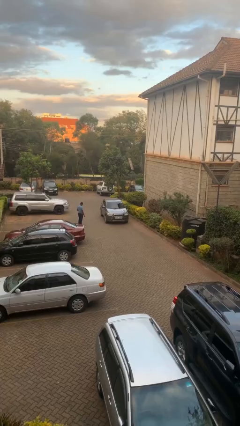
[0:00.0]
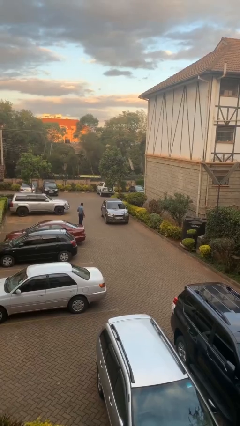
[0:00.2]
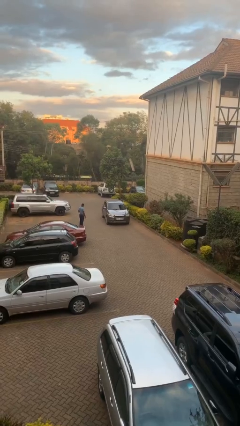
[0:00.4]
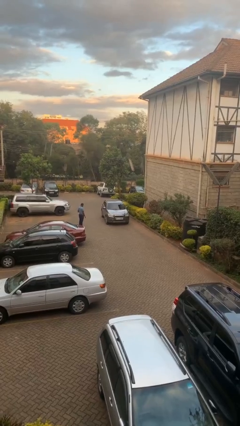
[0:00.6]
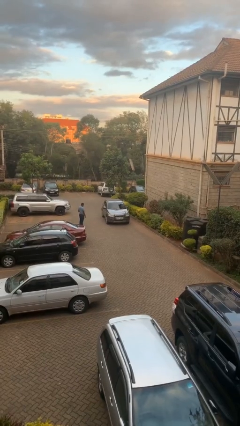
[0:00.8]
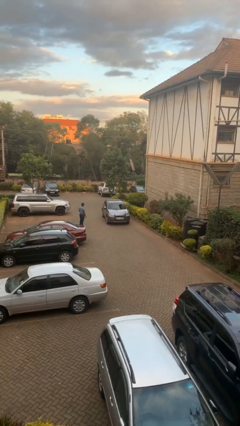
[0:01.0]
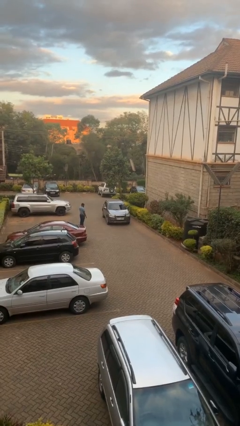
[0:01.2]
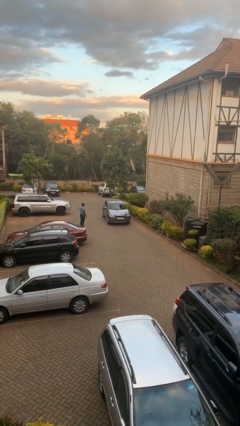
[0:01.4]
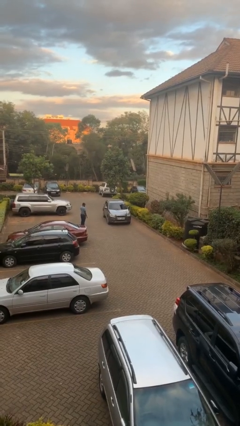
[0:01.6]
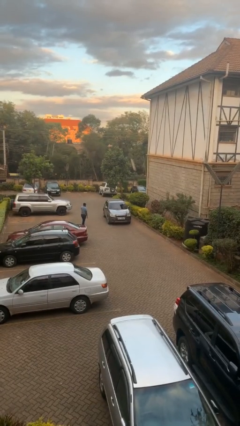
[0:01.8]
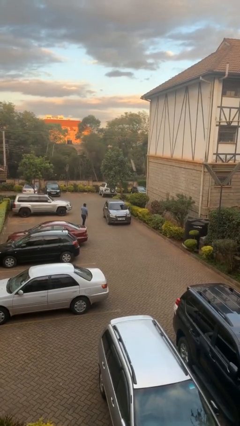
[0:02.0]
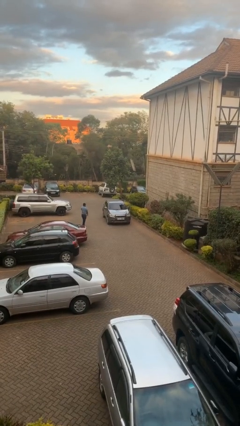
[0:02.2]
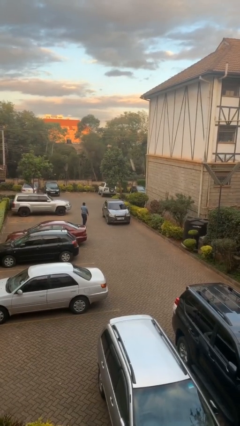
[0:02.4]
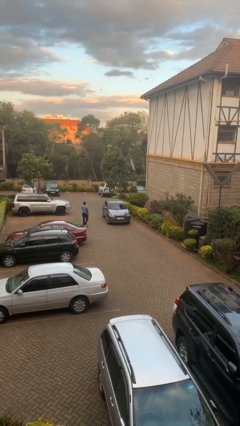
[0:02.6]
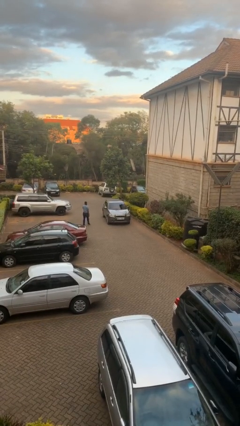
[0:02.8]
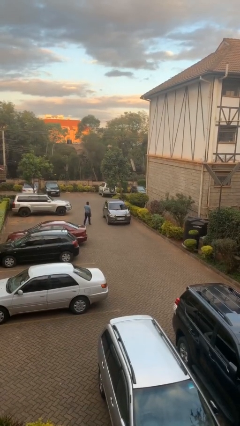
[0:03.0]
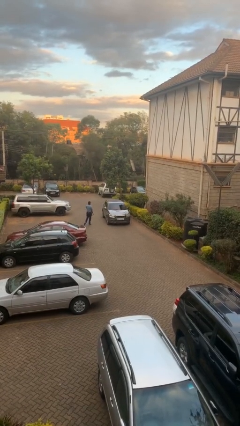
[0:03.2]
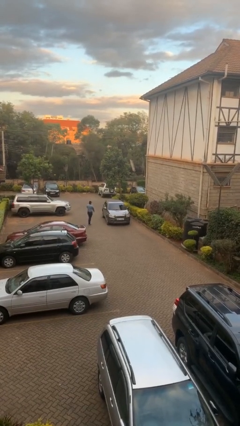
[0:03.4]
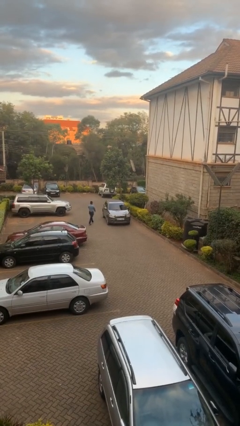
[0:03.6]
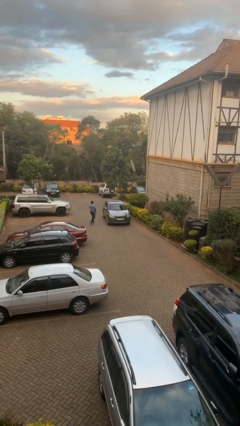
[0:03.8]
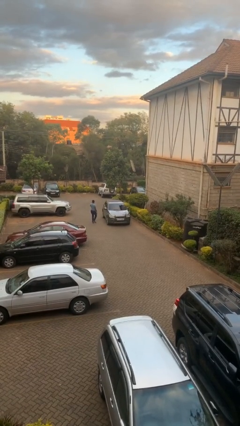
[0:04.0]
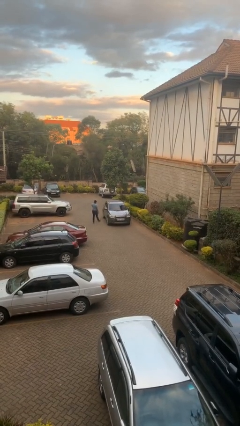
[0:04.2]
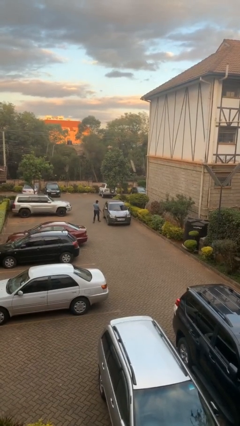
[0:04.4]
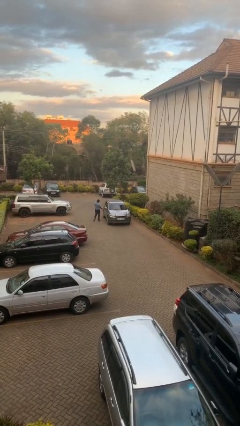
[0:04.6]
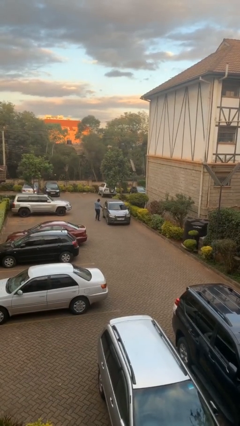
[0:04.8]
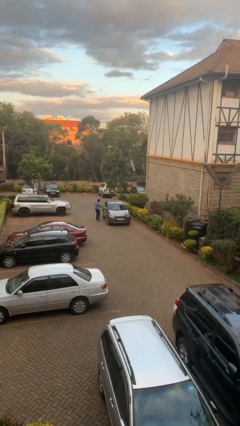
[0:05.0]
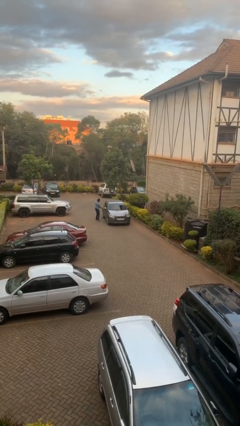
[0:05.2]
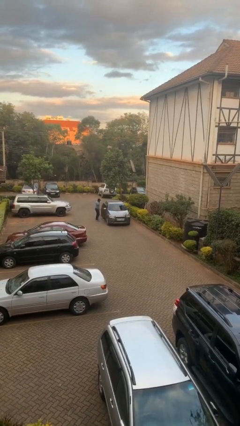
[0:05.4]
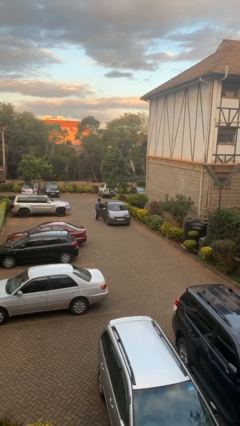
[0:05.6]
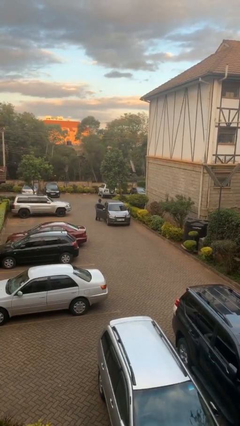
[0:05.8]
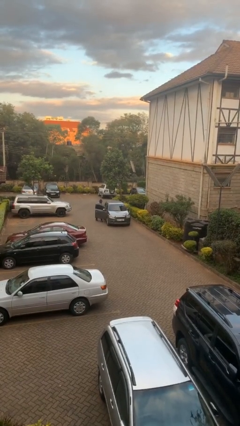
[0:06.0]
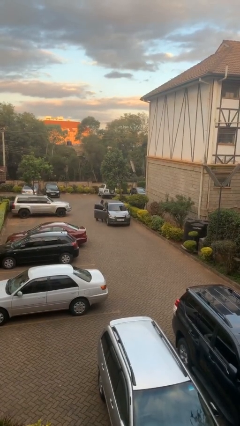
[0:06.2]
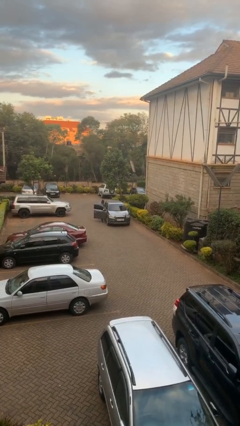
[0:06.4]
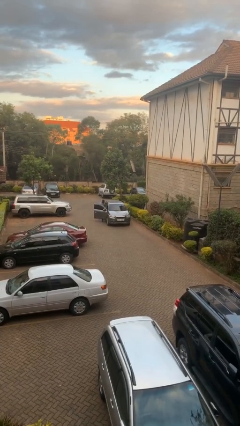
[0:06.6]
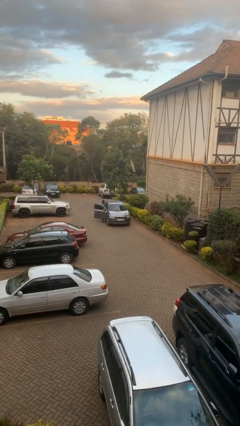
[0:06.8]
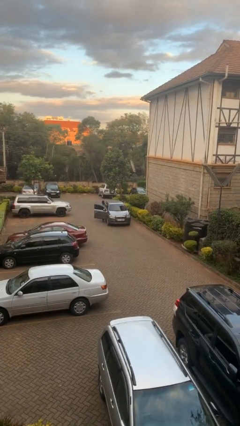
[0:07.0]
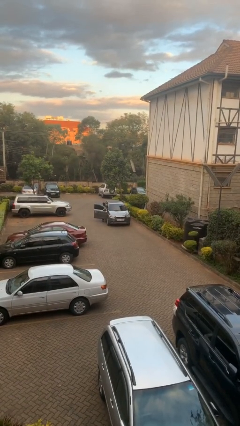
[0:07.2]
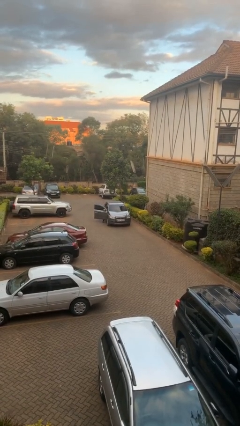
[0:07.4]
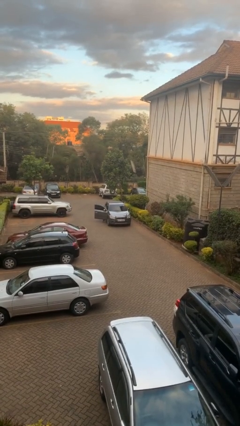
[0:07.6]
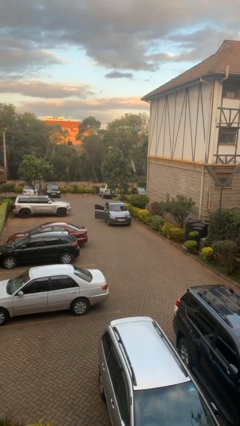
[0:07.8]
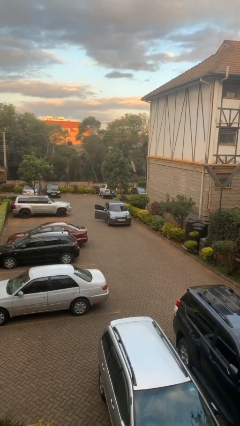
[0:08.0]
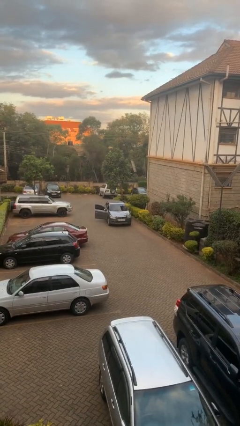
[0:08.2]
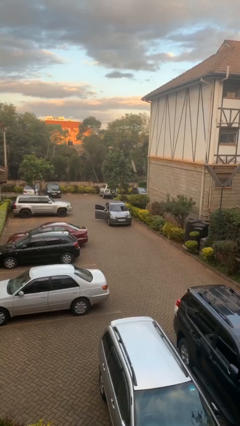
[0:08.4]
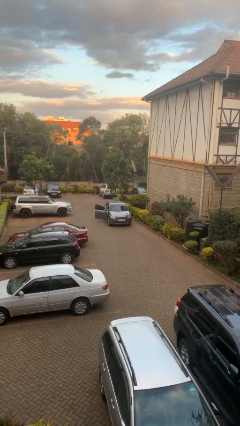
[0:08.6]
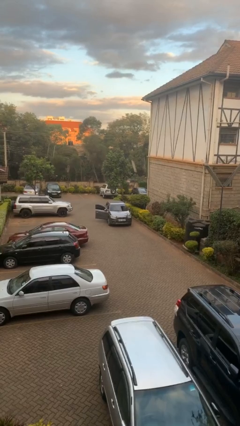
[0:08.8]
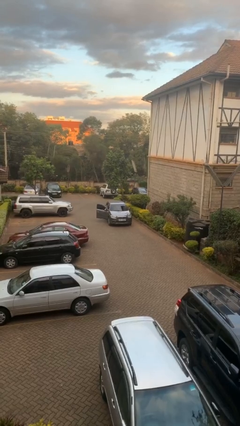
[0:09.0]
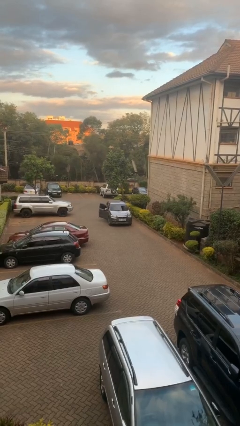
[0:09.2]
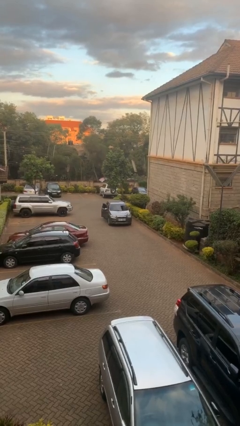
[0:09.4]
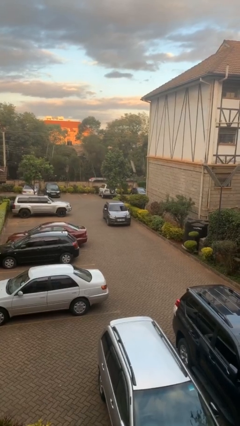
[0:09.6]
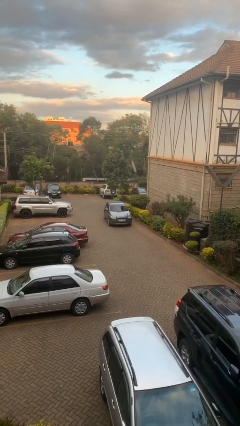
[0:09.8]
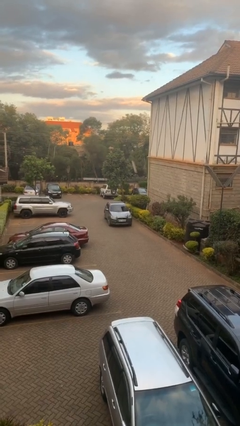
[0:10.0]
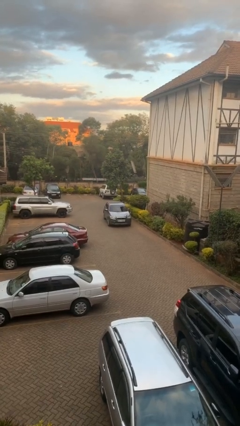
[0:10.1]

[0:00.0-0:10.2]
car picks up person

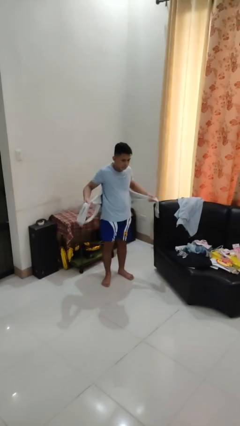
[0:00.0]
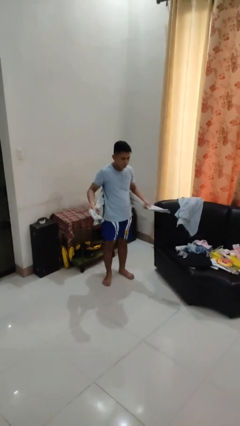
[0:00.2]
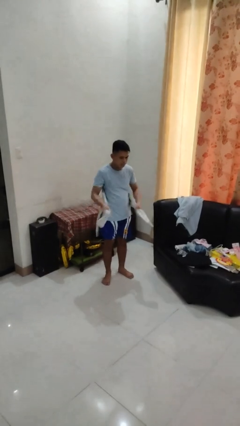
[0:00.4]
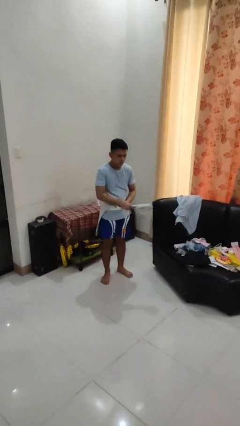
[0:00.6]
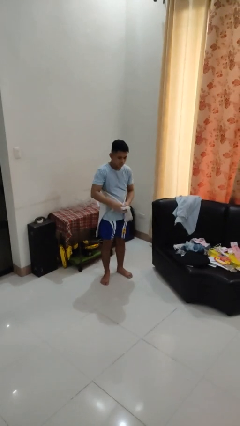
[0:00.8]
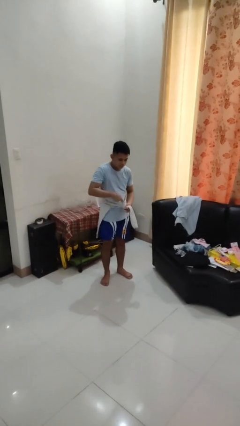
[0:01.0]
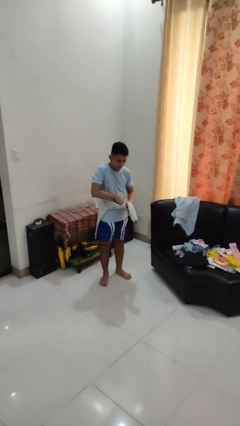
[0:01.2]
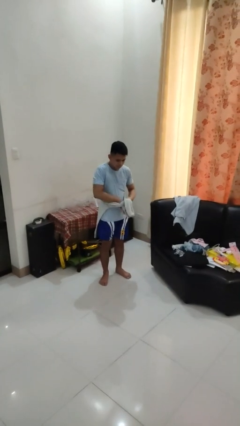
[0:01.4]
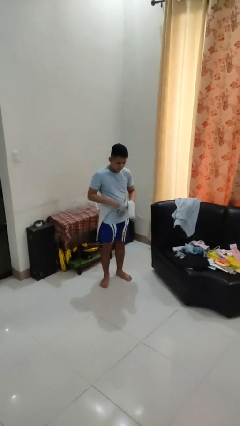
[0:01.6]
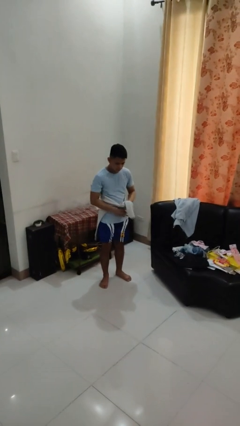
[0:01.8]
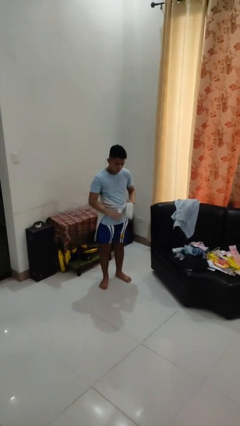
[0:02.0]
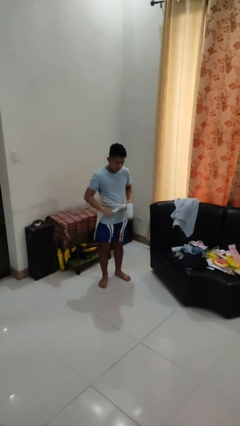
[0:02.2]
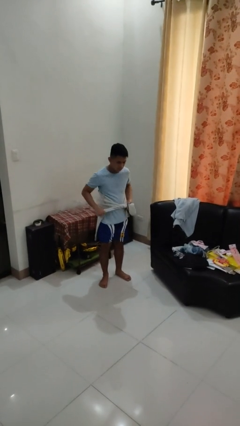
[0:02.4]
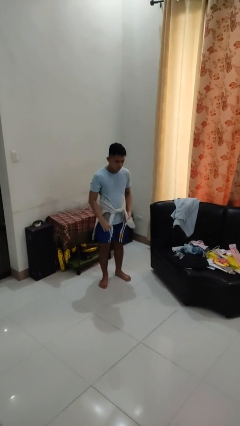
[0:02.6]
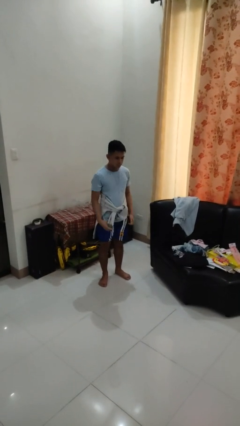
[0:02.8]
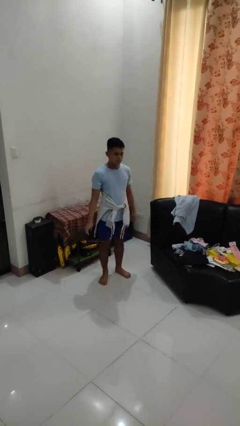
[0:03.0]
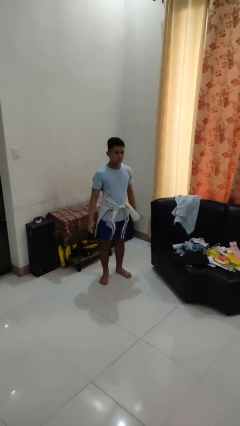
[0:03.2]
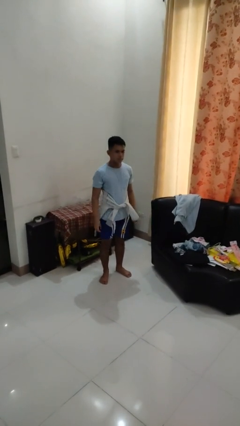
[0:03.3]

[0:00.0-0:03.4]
person ties jacket around waist

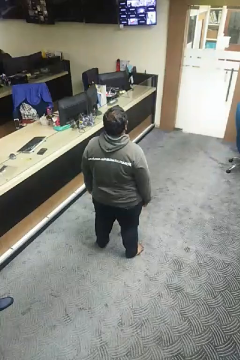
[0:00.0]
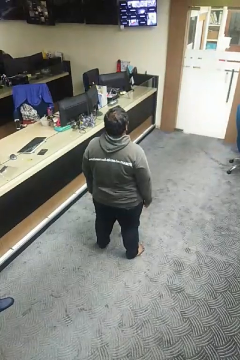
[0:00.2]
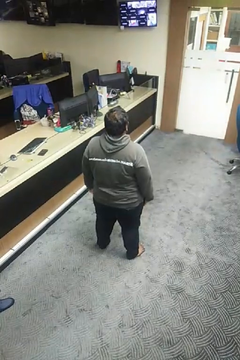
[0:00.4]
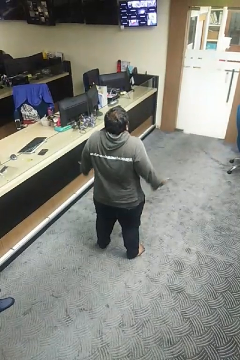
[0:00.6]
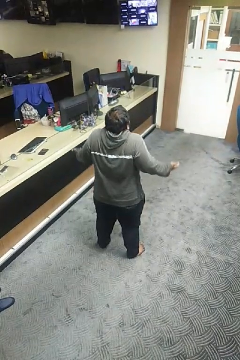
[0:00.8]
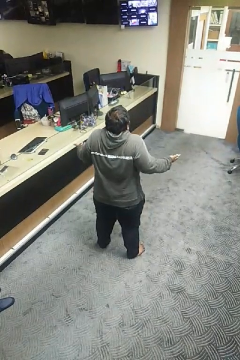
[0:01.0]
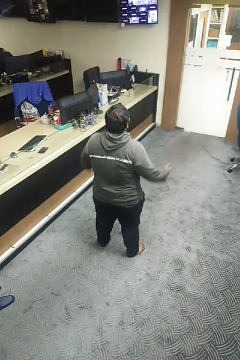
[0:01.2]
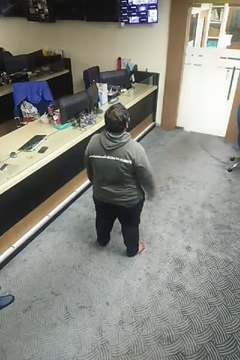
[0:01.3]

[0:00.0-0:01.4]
person shrugs

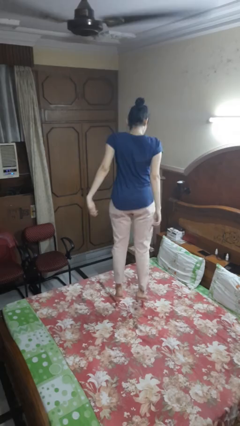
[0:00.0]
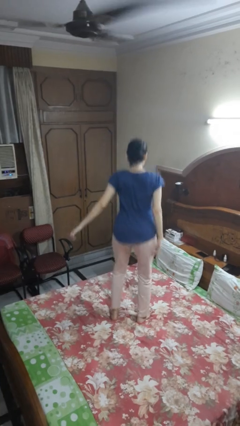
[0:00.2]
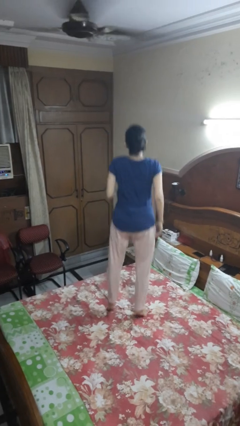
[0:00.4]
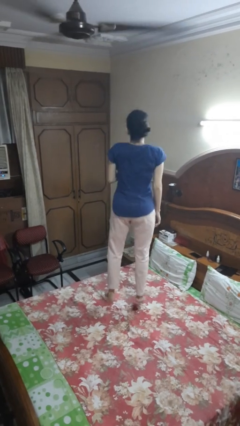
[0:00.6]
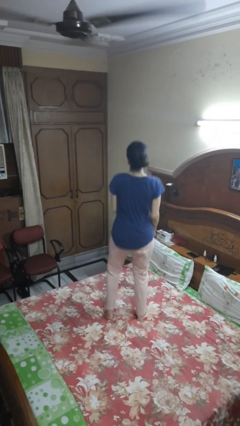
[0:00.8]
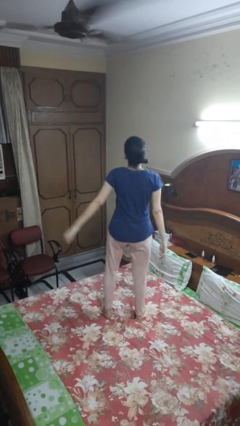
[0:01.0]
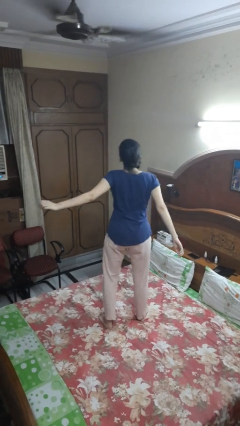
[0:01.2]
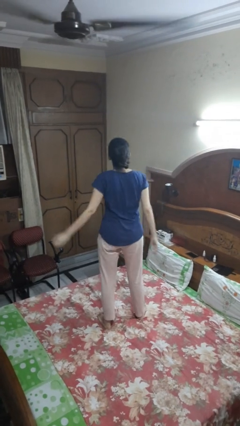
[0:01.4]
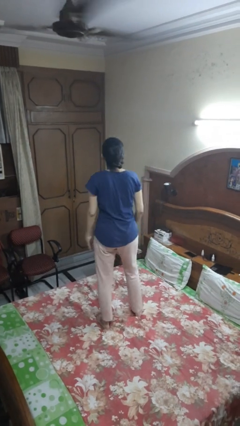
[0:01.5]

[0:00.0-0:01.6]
person jumps on bed

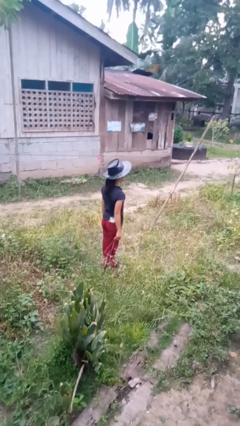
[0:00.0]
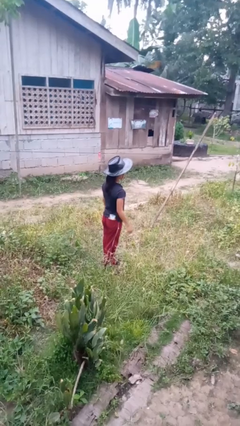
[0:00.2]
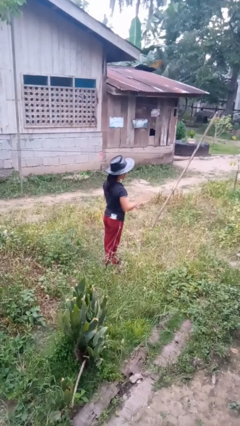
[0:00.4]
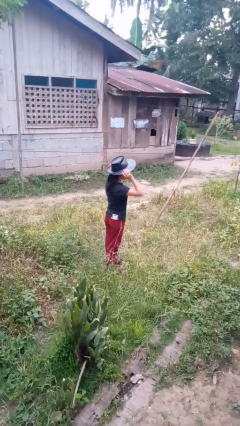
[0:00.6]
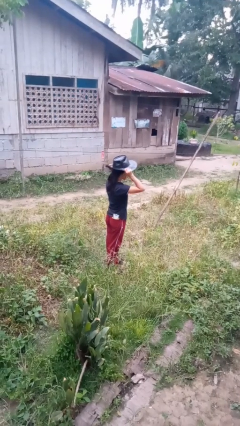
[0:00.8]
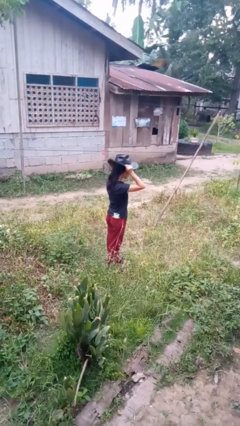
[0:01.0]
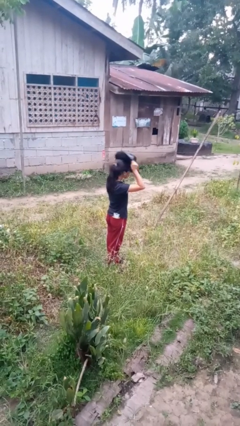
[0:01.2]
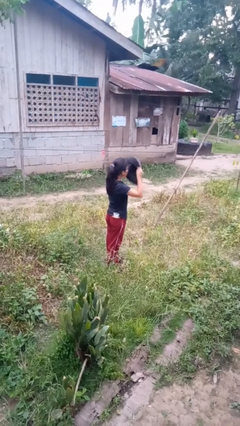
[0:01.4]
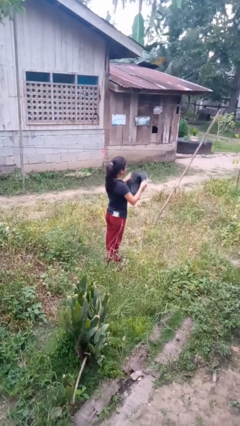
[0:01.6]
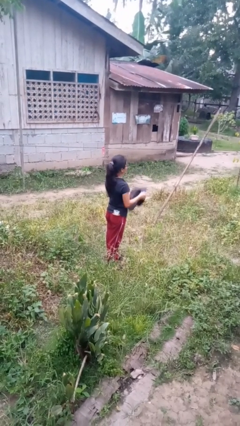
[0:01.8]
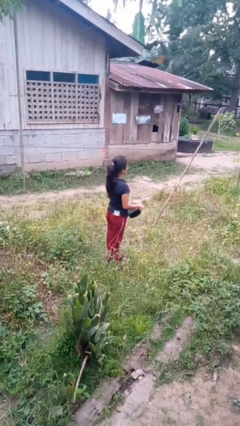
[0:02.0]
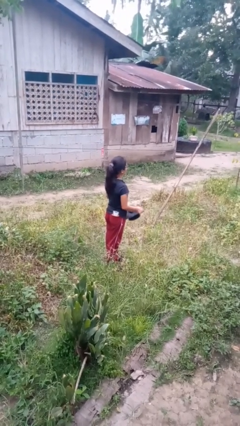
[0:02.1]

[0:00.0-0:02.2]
person takes off hat
